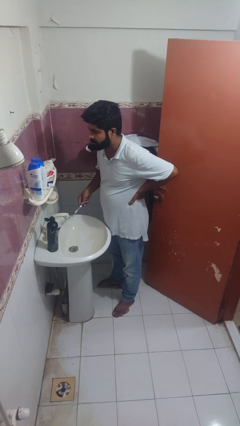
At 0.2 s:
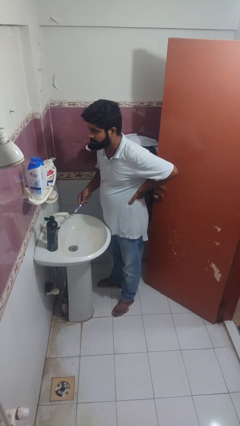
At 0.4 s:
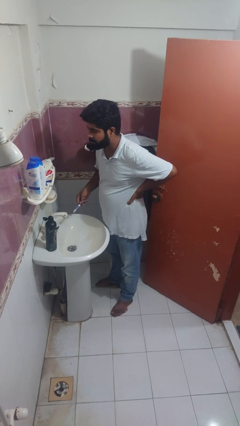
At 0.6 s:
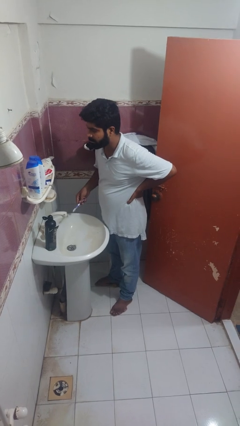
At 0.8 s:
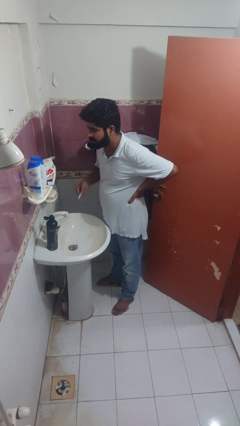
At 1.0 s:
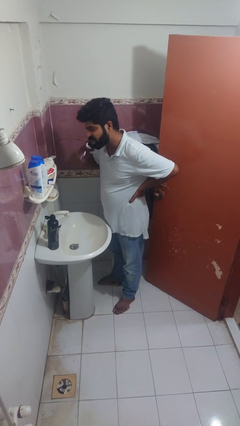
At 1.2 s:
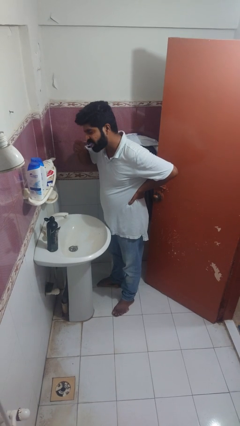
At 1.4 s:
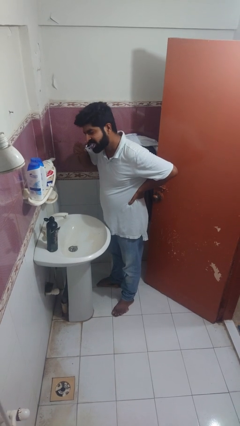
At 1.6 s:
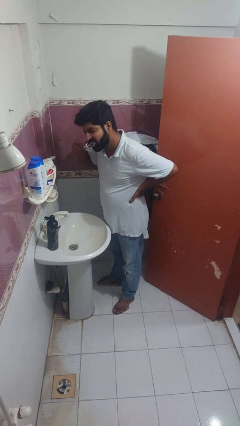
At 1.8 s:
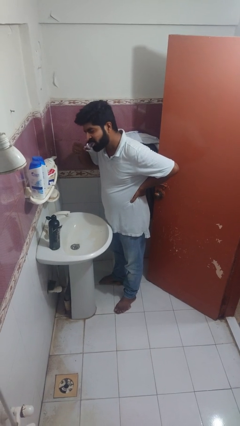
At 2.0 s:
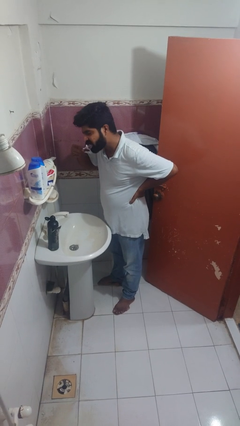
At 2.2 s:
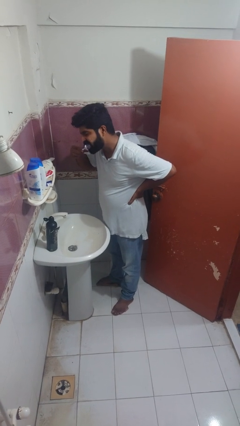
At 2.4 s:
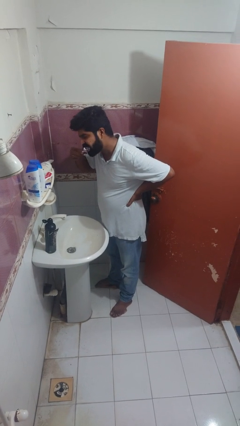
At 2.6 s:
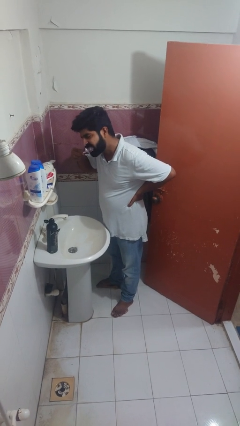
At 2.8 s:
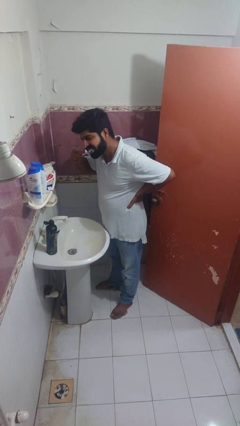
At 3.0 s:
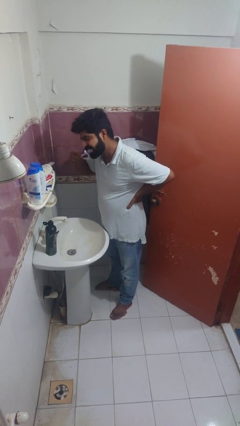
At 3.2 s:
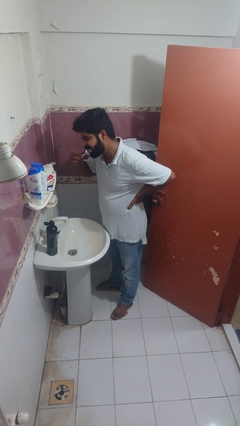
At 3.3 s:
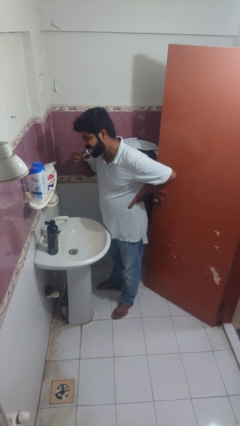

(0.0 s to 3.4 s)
person brushes teeth

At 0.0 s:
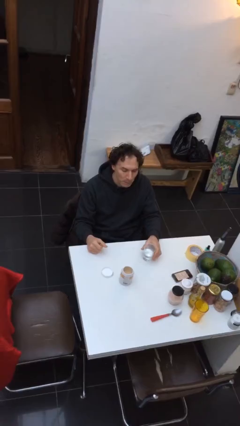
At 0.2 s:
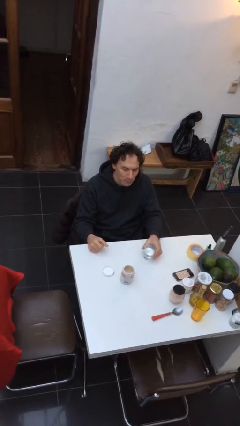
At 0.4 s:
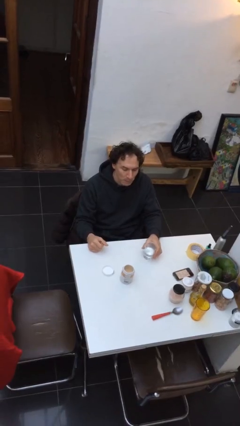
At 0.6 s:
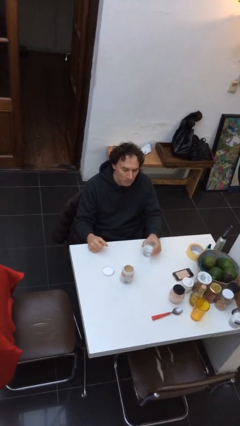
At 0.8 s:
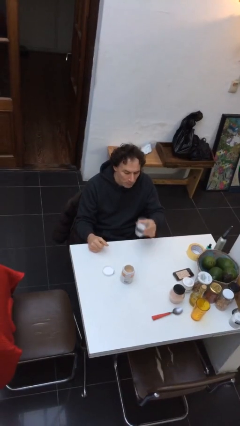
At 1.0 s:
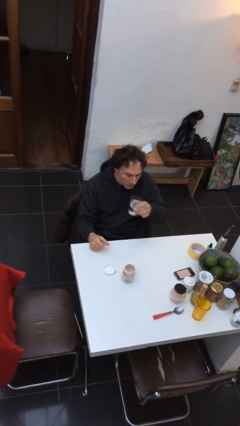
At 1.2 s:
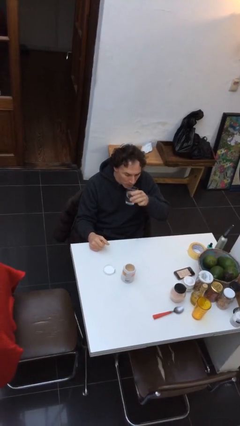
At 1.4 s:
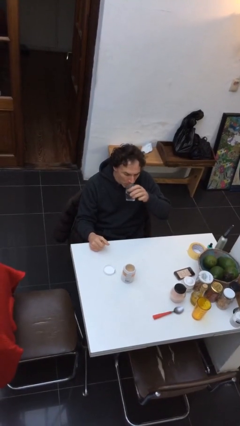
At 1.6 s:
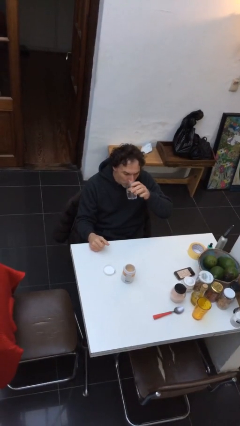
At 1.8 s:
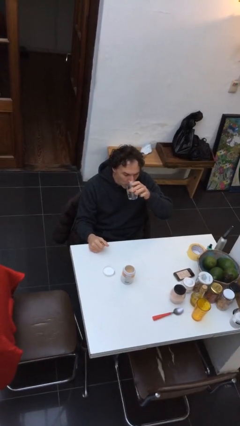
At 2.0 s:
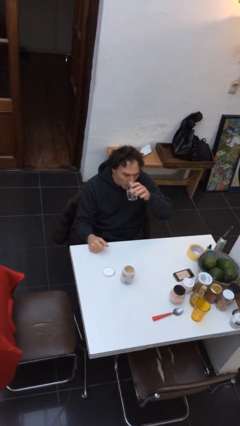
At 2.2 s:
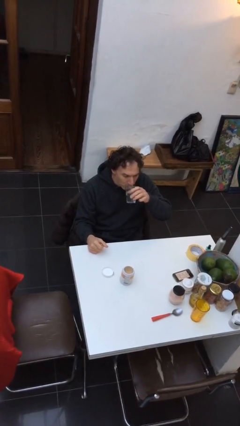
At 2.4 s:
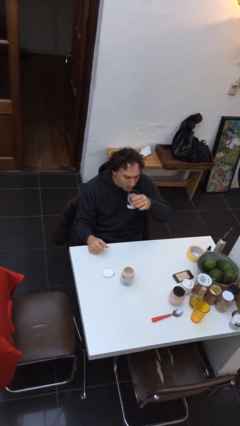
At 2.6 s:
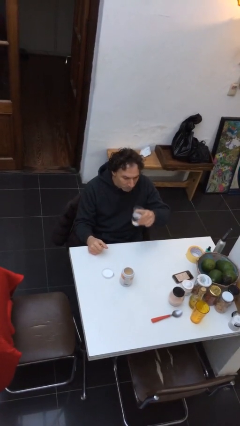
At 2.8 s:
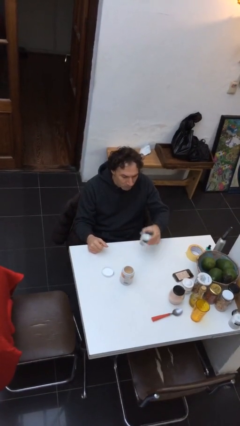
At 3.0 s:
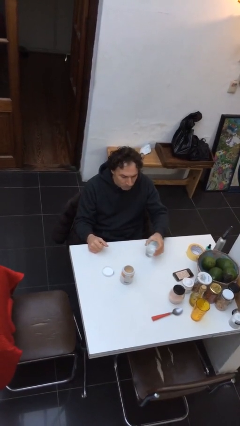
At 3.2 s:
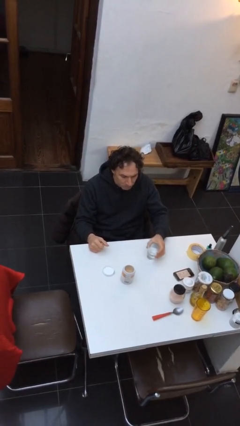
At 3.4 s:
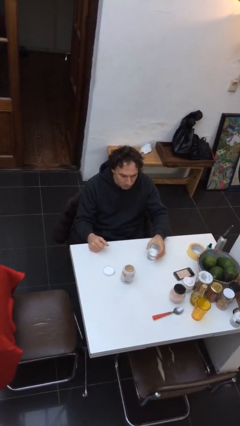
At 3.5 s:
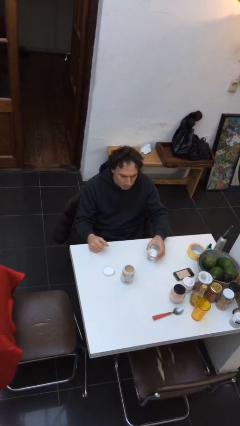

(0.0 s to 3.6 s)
person drinks from cup

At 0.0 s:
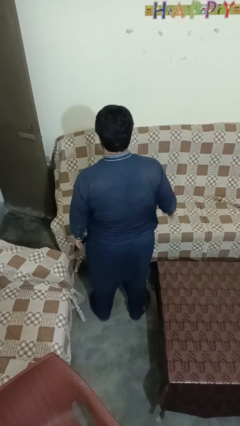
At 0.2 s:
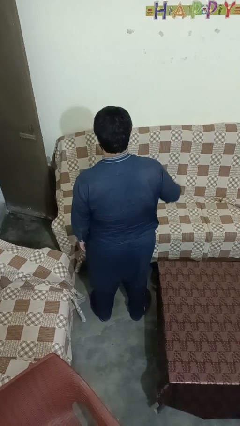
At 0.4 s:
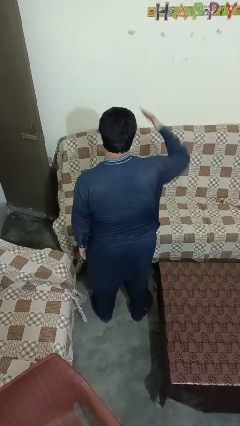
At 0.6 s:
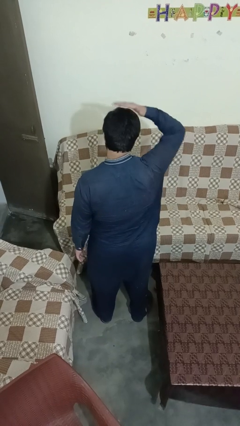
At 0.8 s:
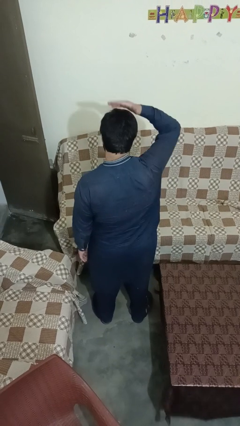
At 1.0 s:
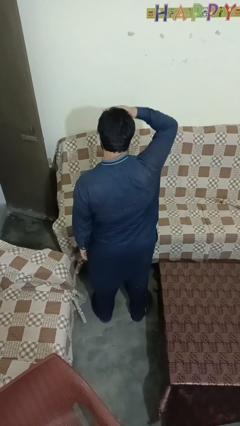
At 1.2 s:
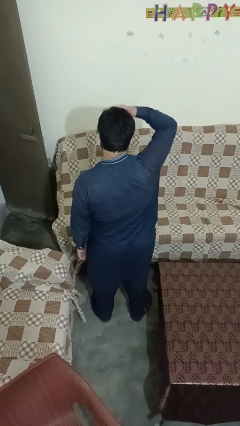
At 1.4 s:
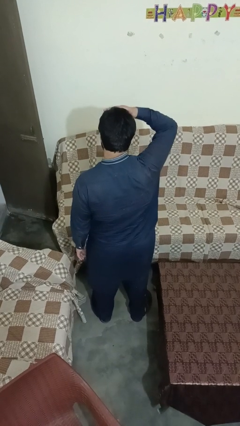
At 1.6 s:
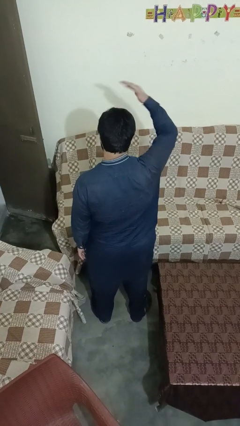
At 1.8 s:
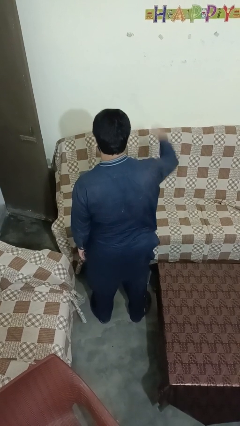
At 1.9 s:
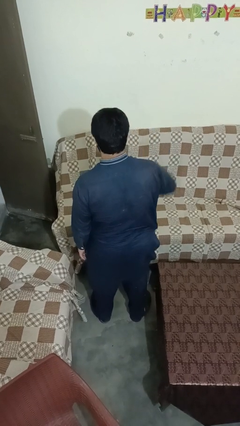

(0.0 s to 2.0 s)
person pats head

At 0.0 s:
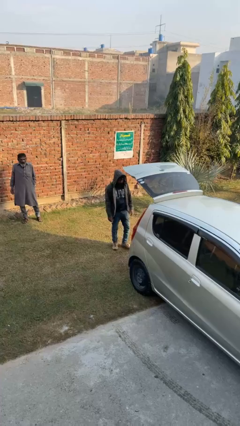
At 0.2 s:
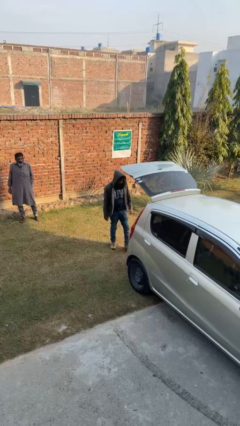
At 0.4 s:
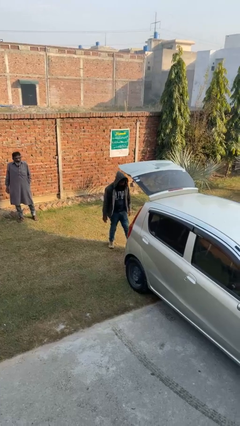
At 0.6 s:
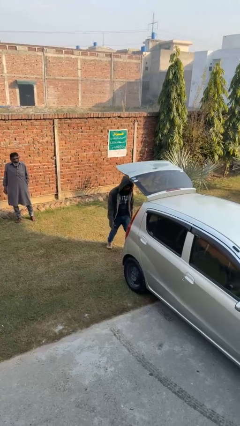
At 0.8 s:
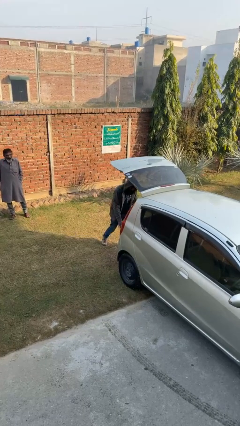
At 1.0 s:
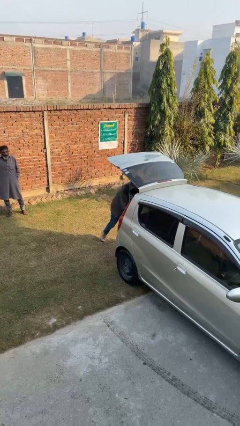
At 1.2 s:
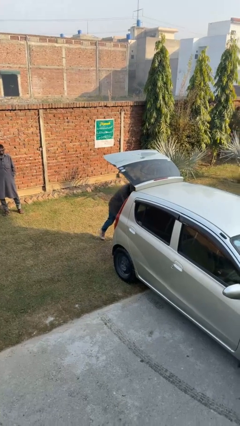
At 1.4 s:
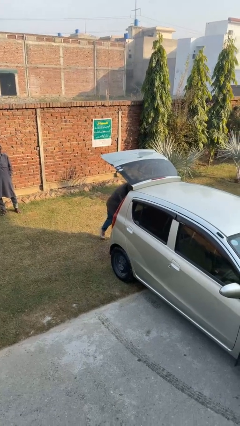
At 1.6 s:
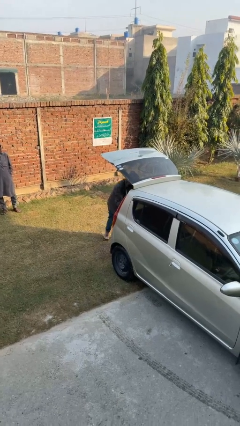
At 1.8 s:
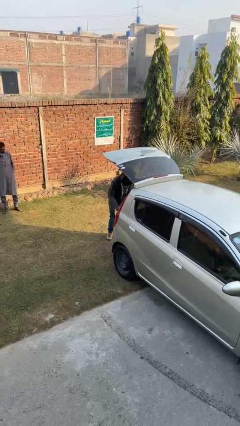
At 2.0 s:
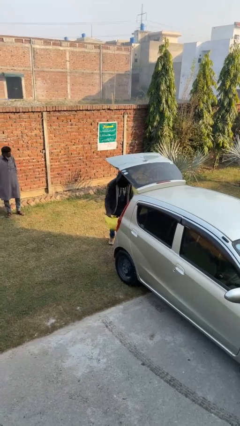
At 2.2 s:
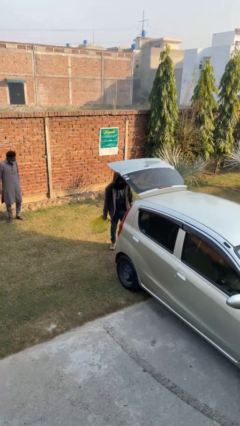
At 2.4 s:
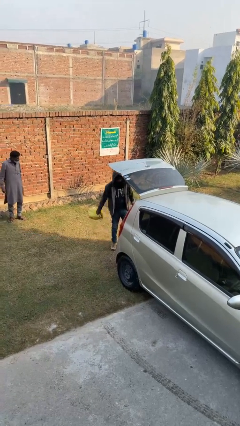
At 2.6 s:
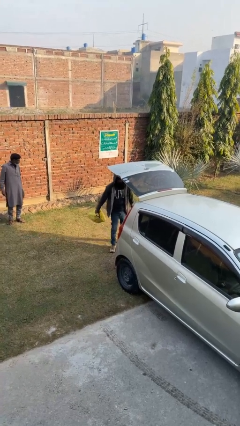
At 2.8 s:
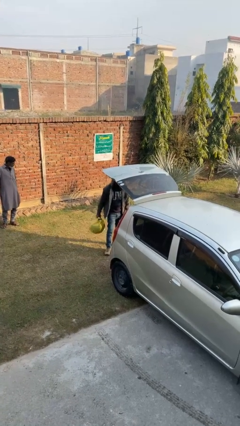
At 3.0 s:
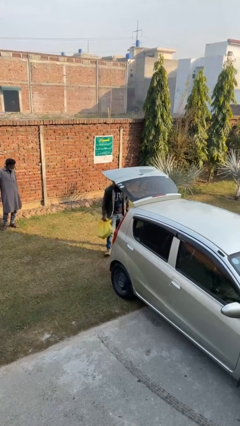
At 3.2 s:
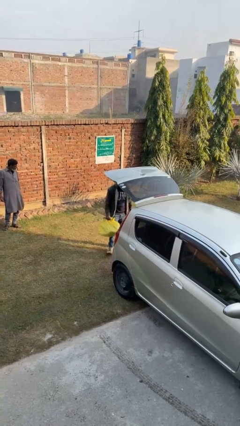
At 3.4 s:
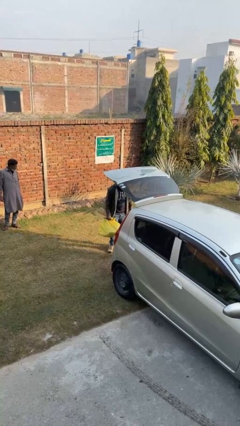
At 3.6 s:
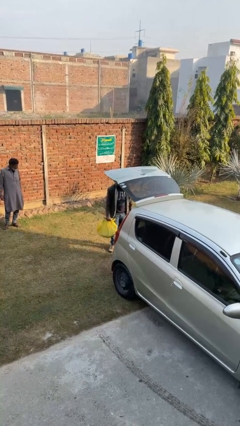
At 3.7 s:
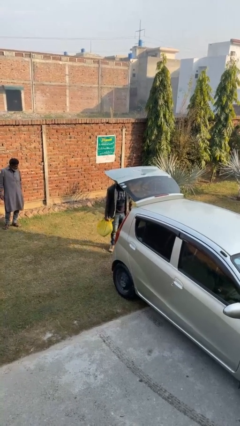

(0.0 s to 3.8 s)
person unloads car

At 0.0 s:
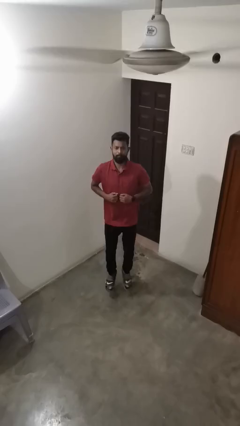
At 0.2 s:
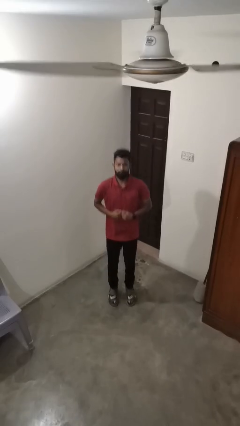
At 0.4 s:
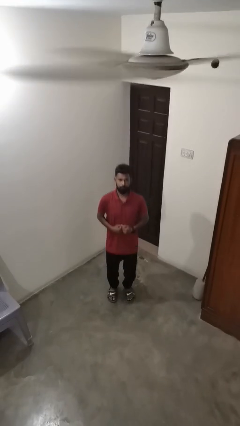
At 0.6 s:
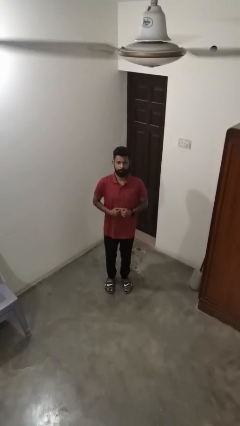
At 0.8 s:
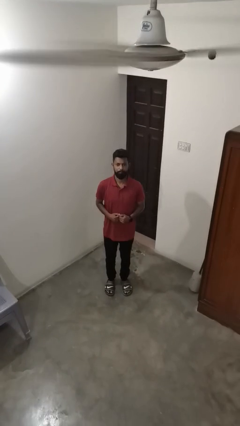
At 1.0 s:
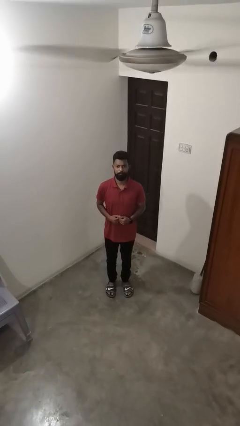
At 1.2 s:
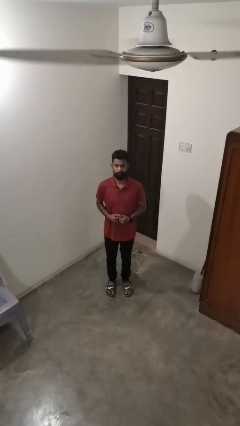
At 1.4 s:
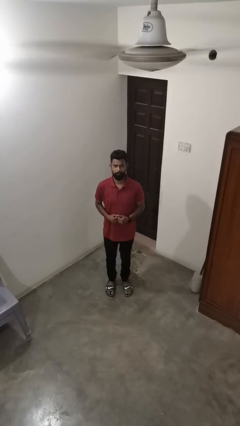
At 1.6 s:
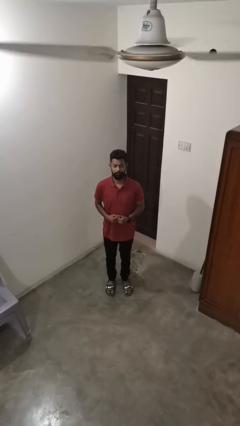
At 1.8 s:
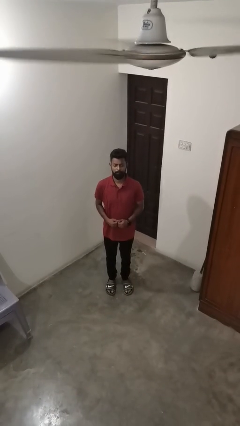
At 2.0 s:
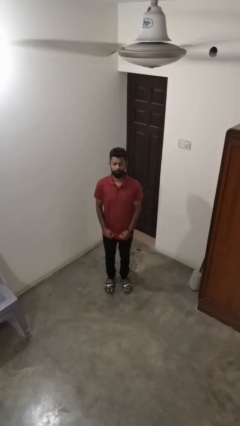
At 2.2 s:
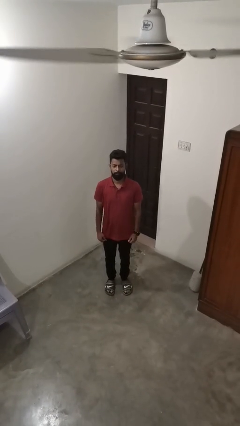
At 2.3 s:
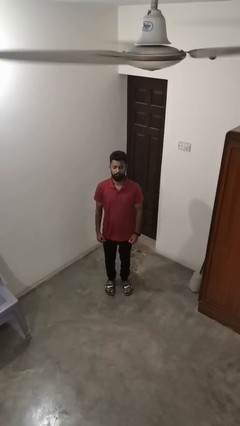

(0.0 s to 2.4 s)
person jumps

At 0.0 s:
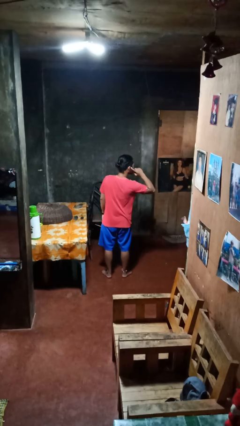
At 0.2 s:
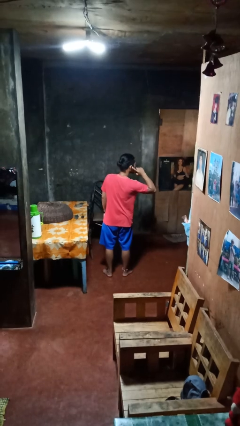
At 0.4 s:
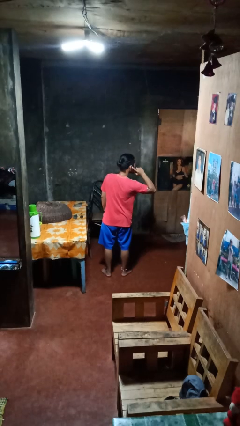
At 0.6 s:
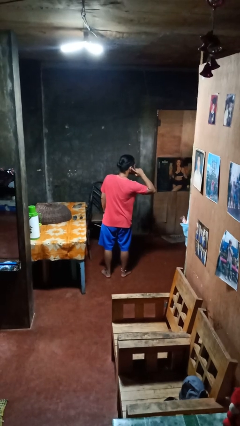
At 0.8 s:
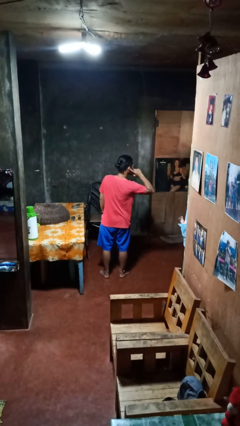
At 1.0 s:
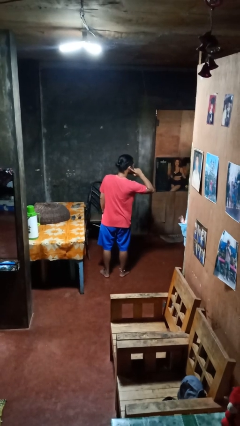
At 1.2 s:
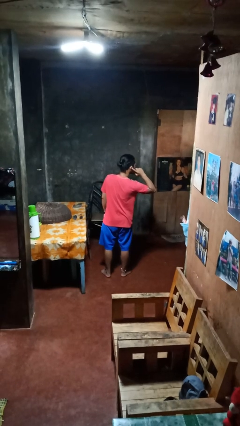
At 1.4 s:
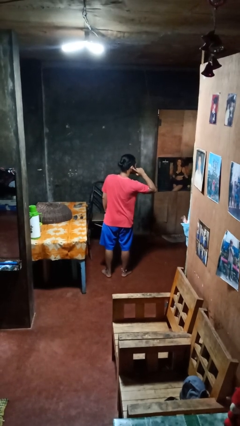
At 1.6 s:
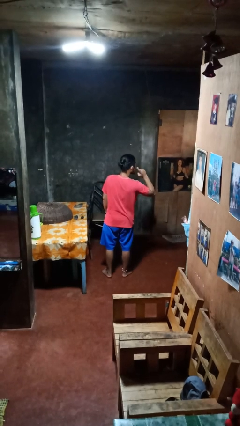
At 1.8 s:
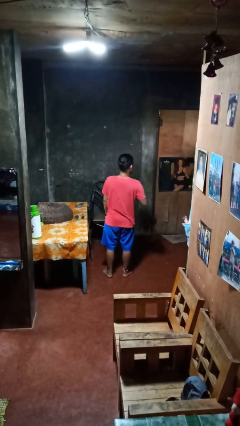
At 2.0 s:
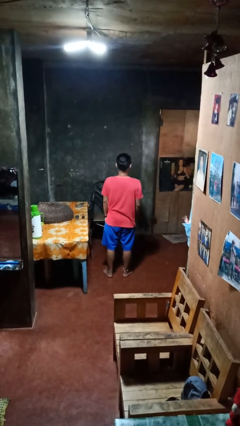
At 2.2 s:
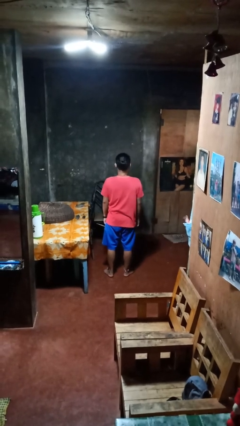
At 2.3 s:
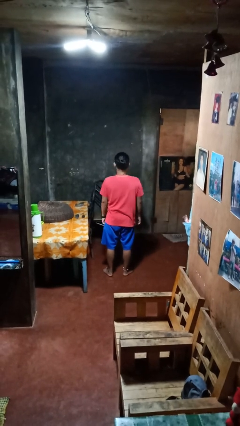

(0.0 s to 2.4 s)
person gestures listen closely
